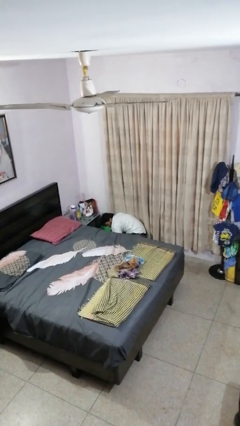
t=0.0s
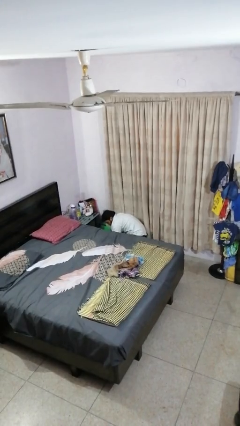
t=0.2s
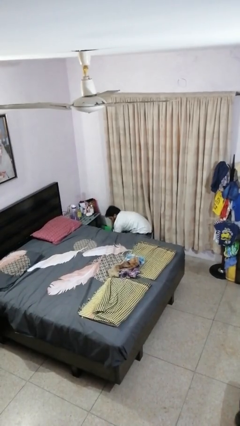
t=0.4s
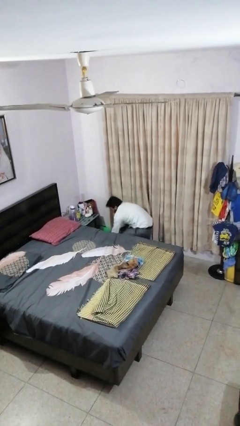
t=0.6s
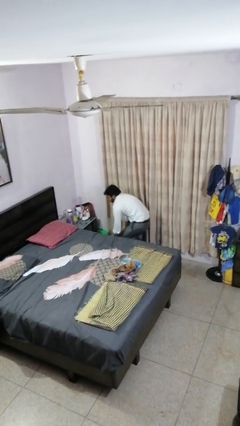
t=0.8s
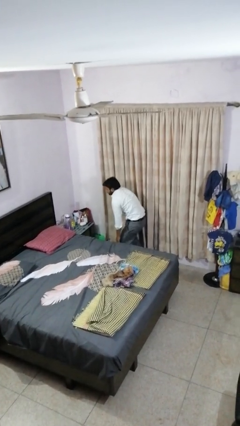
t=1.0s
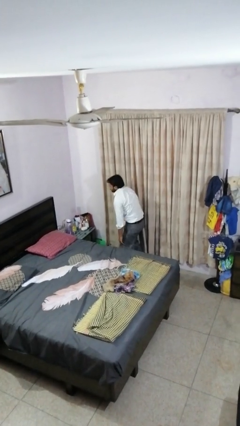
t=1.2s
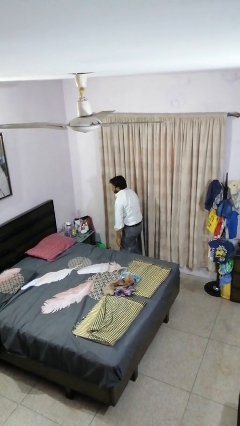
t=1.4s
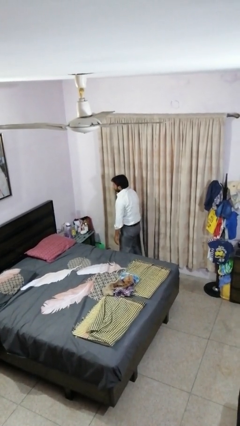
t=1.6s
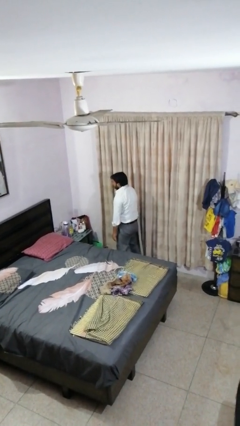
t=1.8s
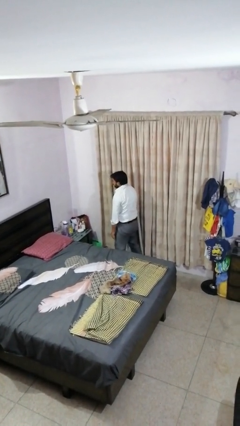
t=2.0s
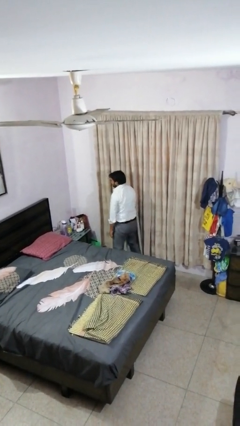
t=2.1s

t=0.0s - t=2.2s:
person stands up from floor

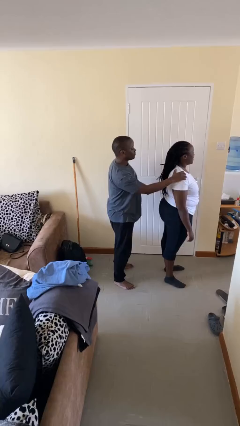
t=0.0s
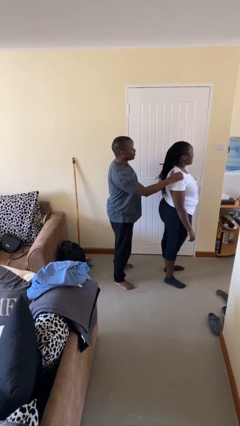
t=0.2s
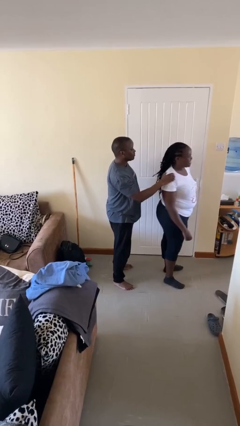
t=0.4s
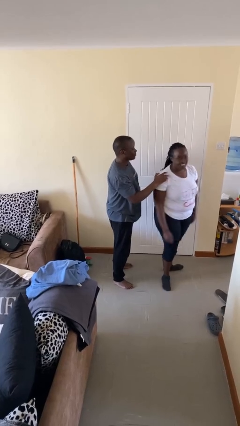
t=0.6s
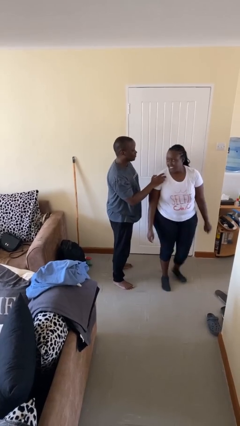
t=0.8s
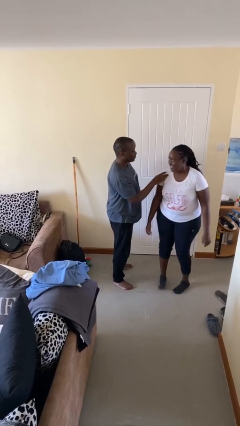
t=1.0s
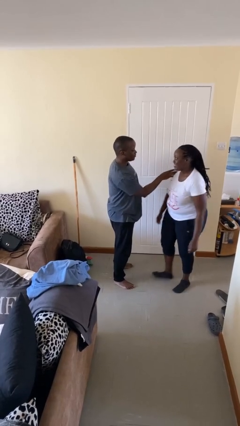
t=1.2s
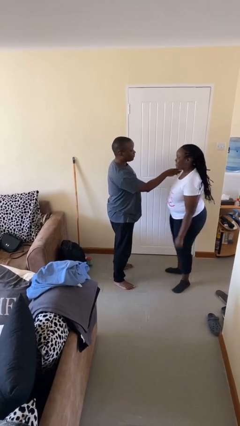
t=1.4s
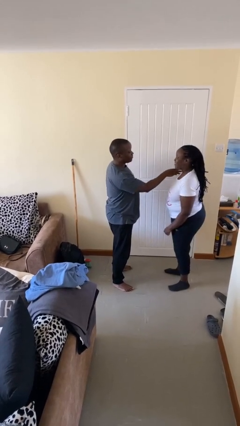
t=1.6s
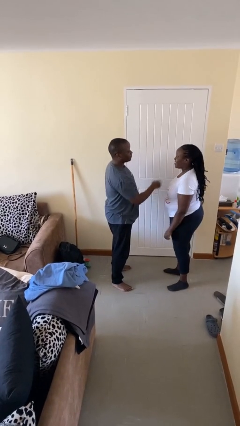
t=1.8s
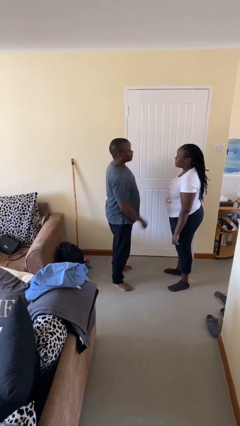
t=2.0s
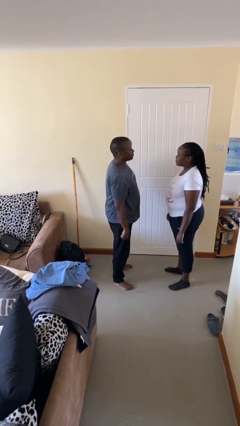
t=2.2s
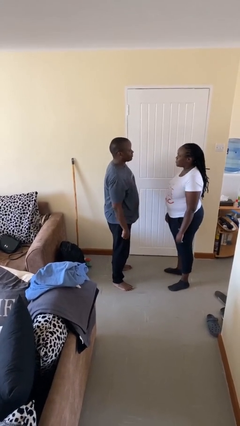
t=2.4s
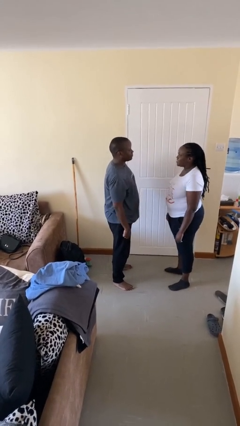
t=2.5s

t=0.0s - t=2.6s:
person spins person around

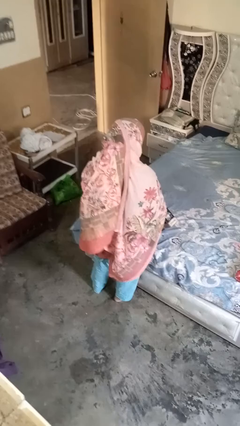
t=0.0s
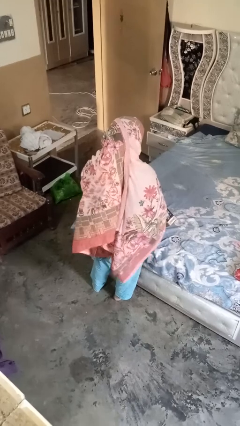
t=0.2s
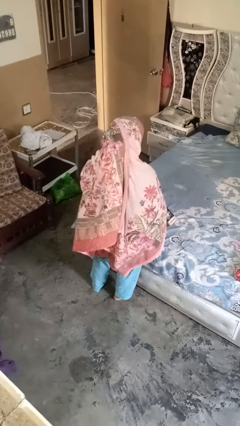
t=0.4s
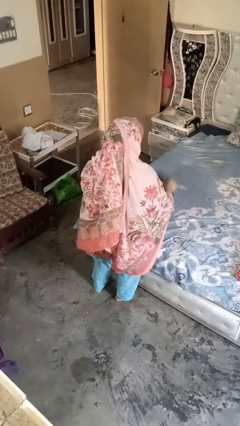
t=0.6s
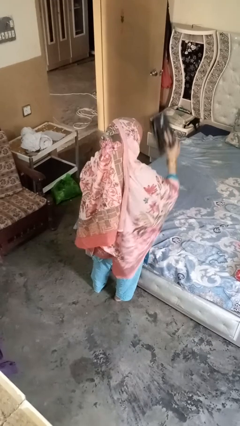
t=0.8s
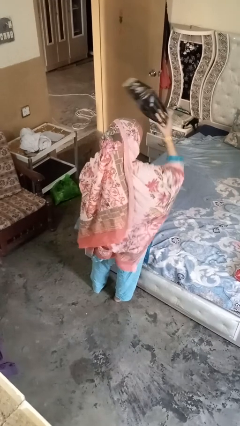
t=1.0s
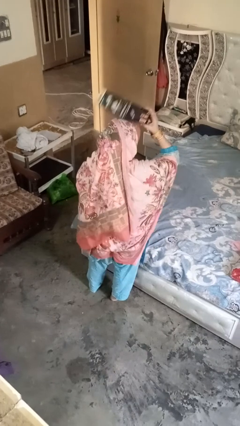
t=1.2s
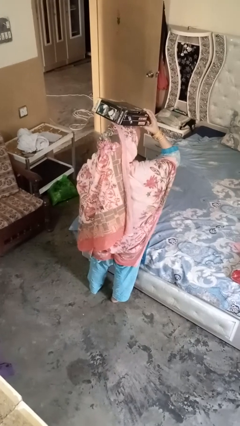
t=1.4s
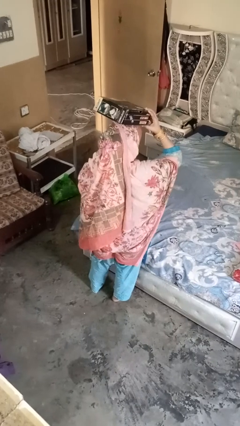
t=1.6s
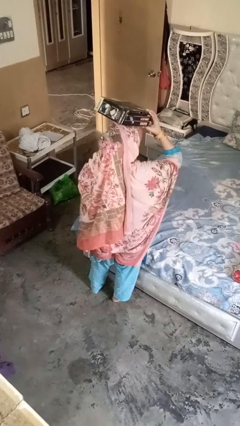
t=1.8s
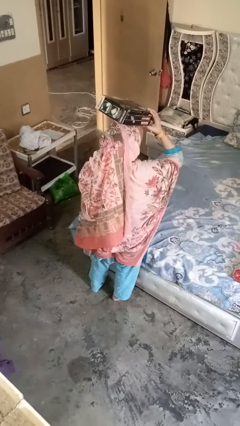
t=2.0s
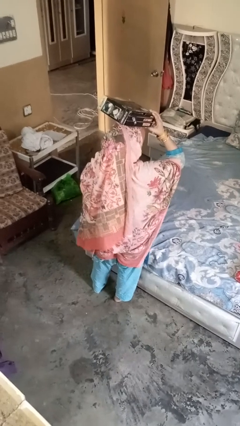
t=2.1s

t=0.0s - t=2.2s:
person holds object above head

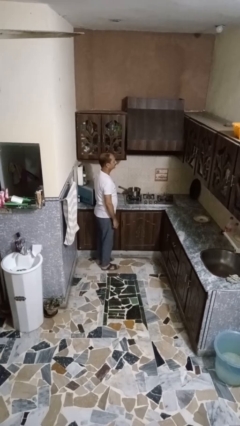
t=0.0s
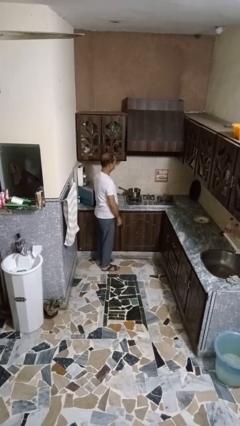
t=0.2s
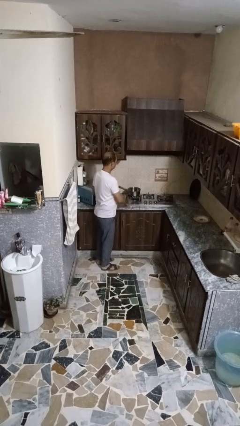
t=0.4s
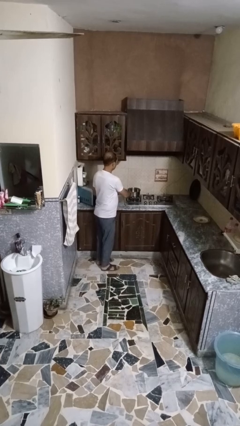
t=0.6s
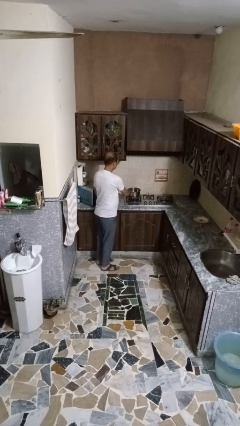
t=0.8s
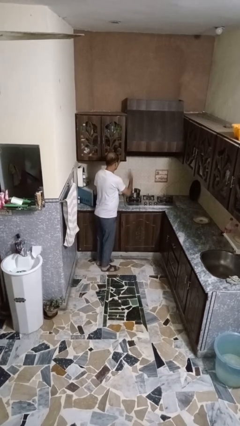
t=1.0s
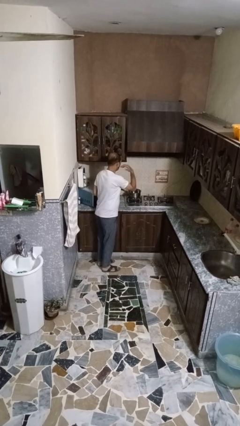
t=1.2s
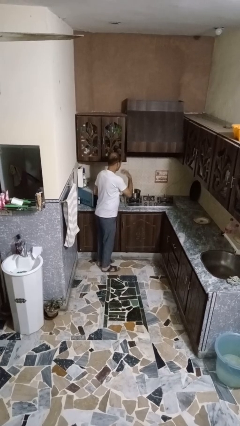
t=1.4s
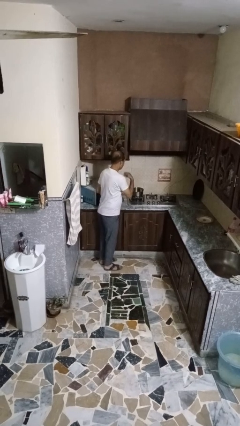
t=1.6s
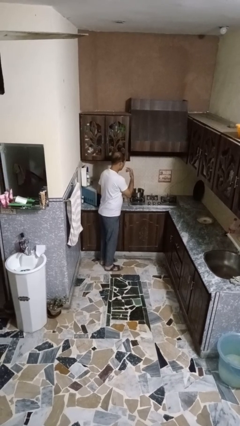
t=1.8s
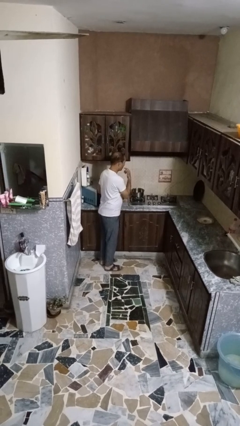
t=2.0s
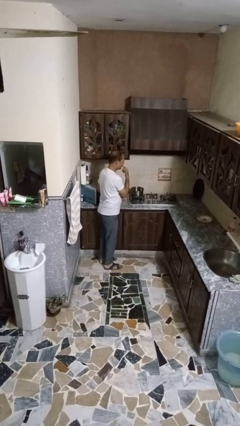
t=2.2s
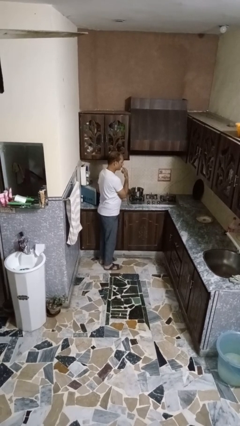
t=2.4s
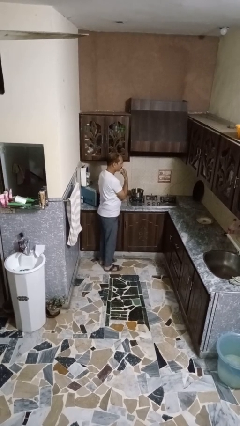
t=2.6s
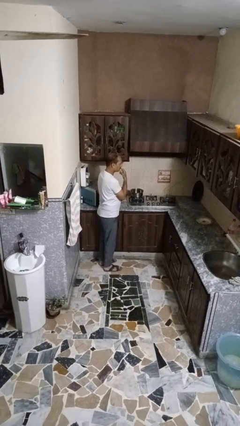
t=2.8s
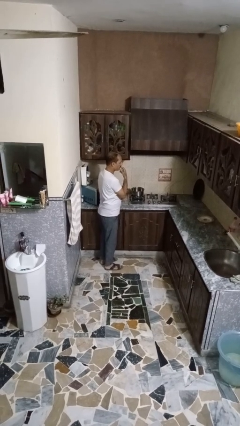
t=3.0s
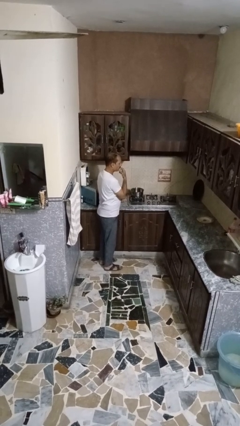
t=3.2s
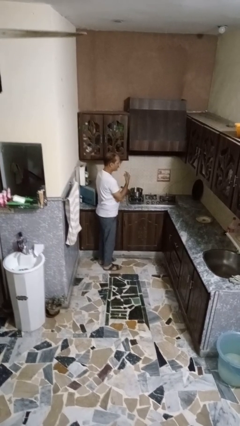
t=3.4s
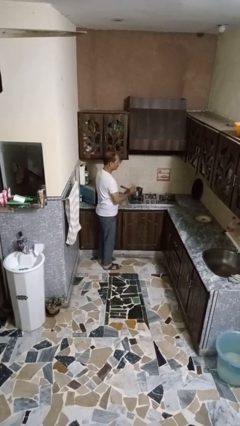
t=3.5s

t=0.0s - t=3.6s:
person burns hand

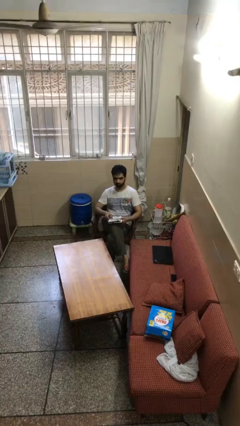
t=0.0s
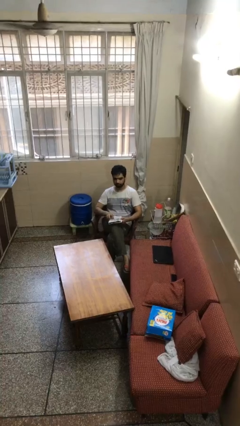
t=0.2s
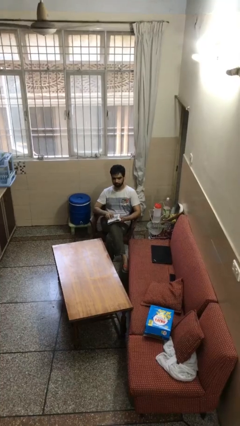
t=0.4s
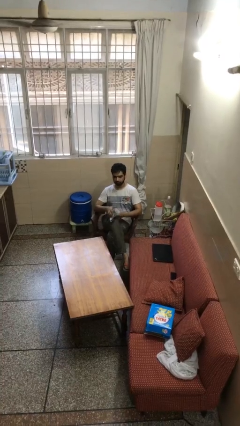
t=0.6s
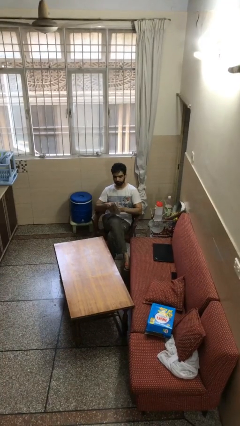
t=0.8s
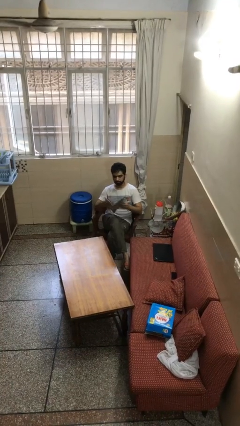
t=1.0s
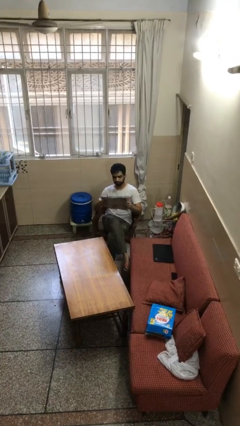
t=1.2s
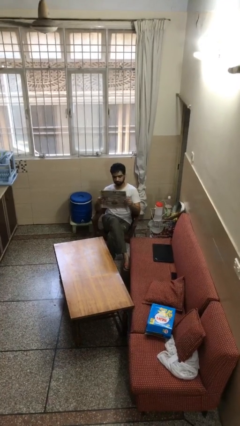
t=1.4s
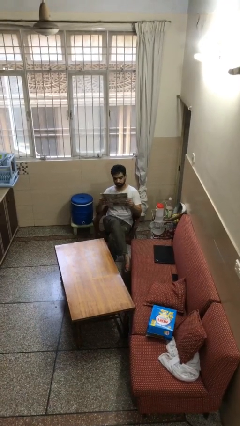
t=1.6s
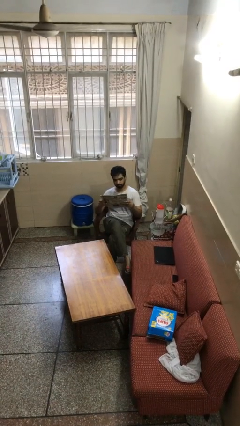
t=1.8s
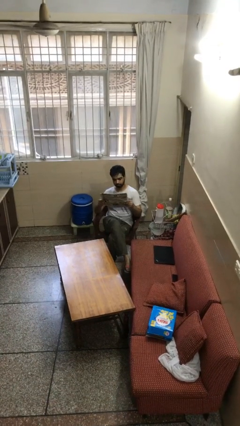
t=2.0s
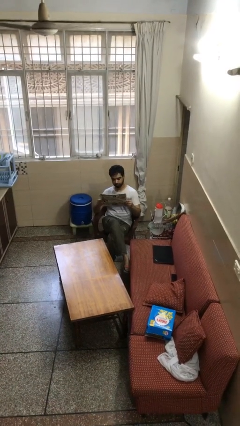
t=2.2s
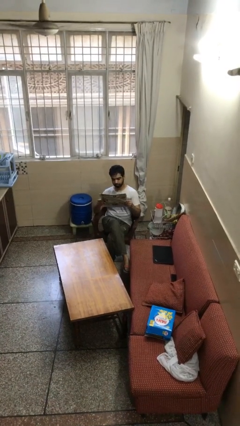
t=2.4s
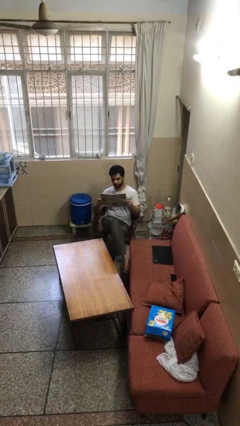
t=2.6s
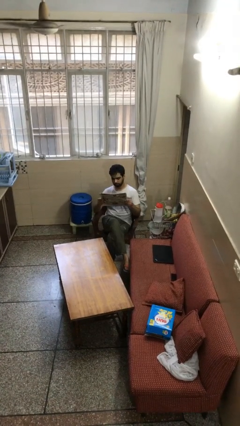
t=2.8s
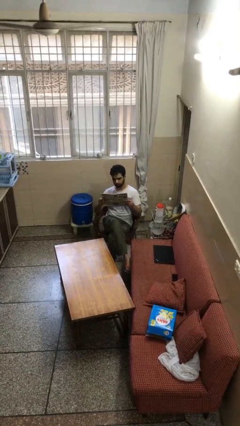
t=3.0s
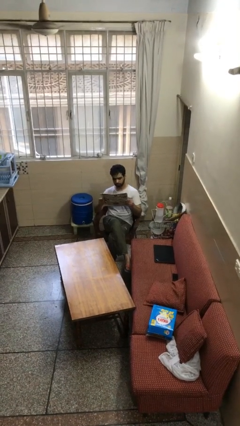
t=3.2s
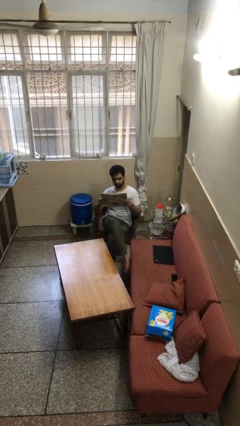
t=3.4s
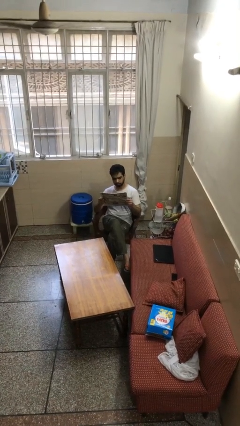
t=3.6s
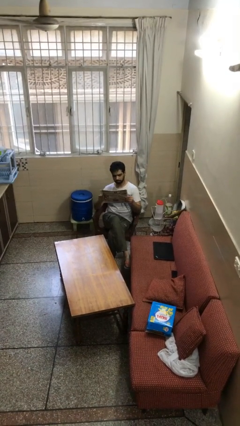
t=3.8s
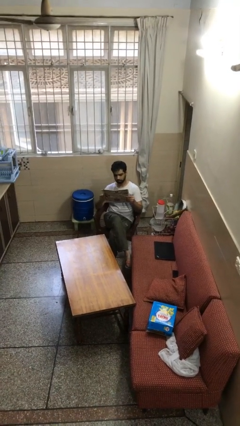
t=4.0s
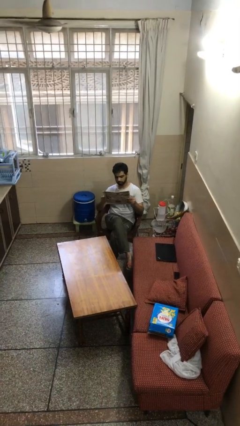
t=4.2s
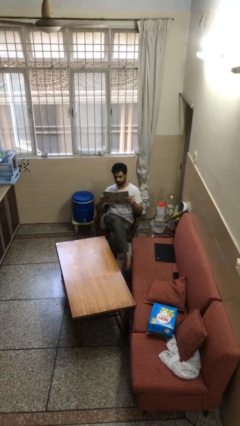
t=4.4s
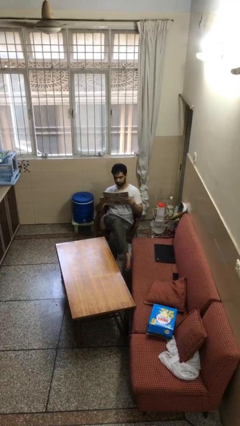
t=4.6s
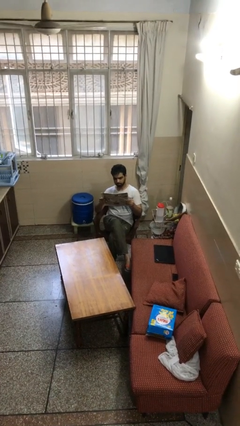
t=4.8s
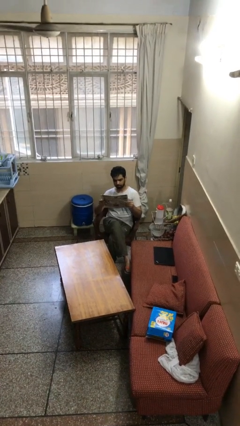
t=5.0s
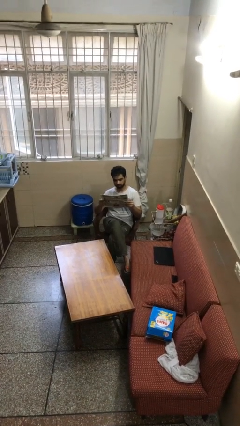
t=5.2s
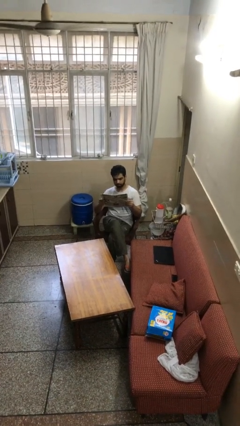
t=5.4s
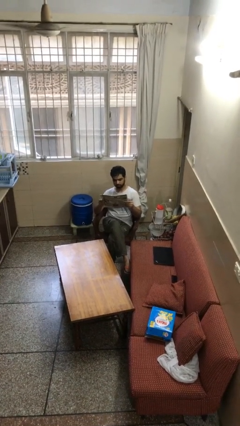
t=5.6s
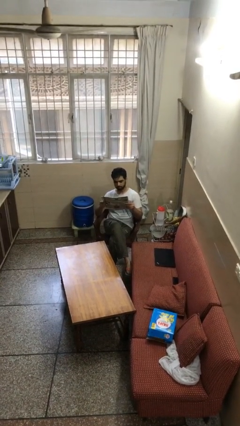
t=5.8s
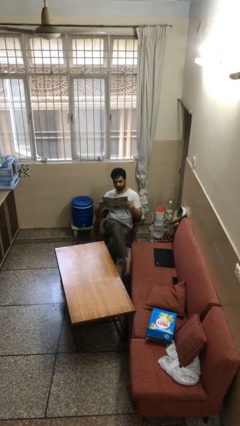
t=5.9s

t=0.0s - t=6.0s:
person reads document

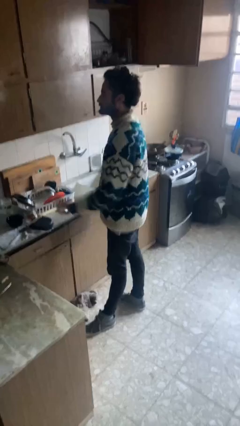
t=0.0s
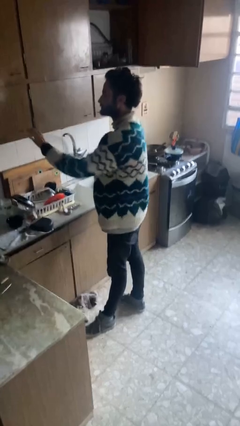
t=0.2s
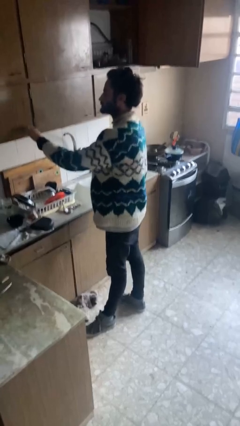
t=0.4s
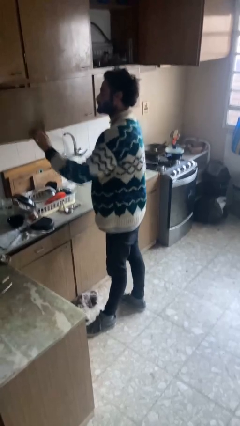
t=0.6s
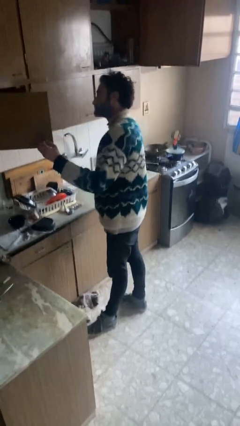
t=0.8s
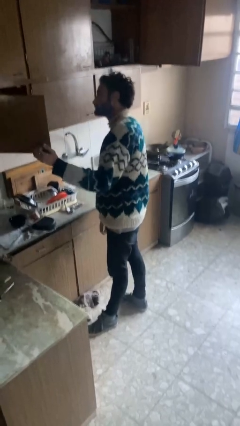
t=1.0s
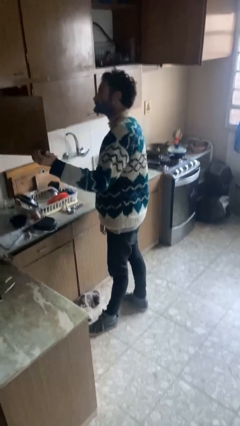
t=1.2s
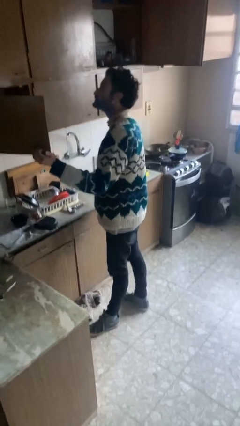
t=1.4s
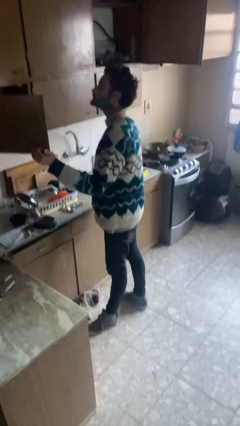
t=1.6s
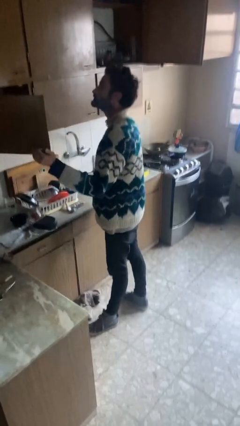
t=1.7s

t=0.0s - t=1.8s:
person opens cabinet
